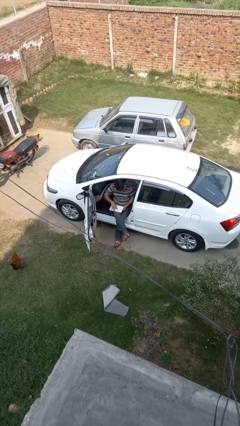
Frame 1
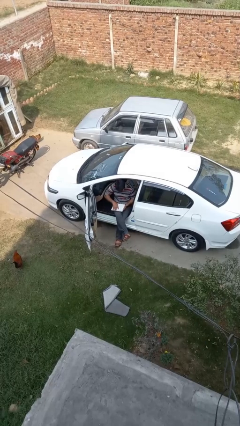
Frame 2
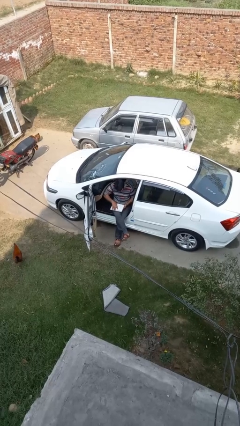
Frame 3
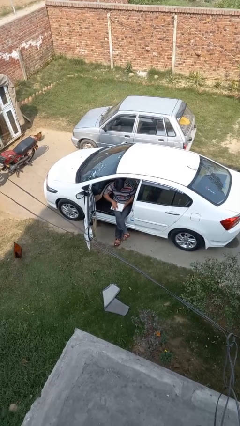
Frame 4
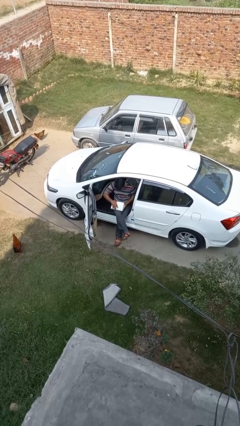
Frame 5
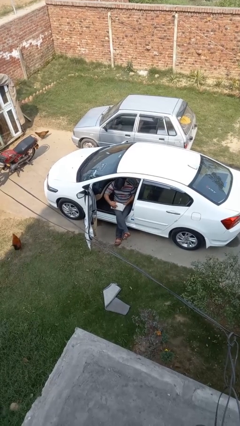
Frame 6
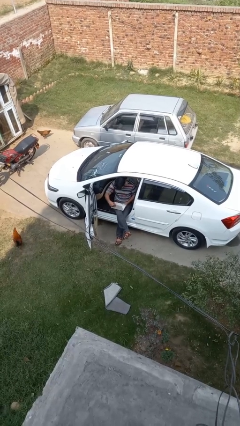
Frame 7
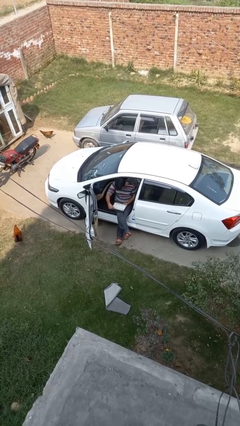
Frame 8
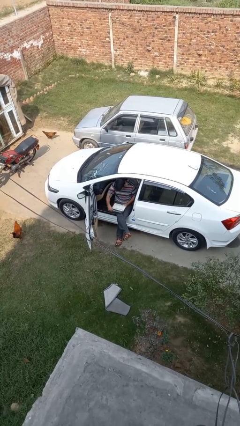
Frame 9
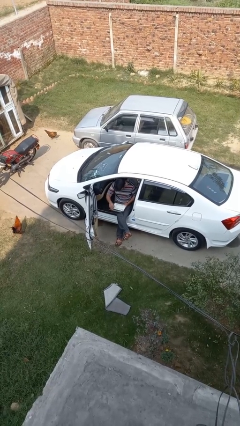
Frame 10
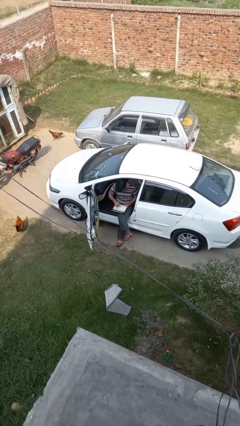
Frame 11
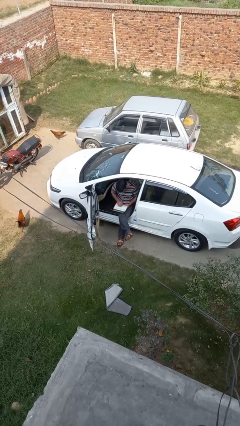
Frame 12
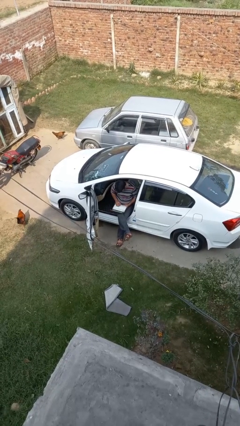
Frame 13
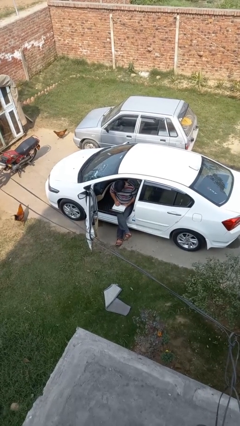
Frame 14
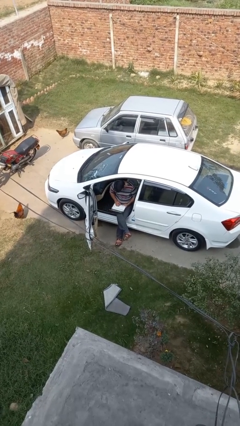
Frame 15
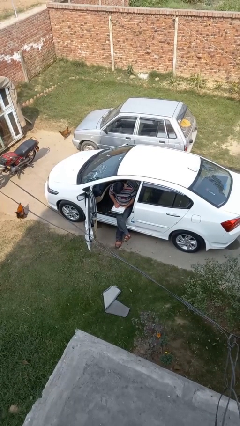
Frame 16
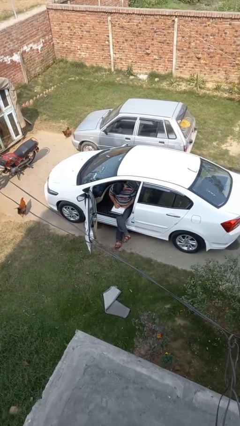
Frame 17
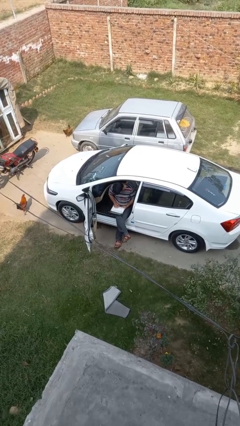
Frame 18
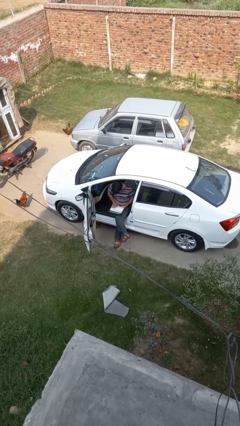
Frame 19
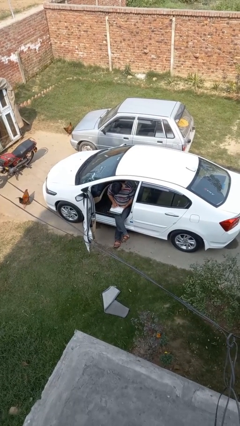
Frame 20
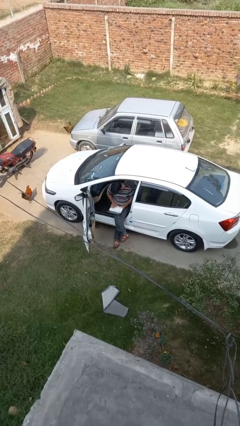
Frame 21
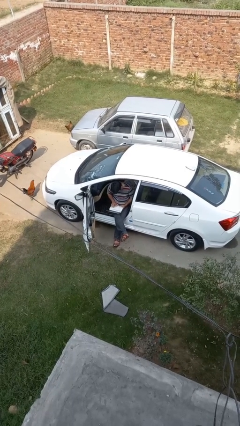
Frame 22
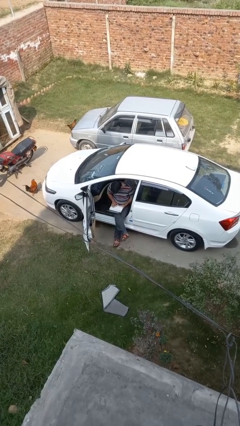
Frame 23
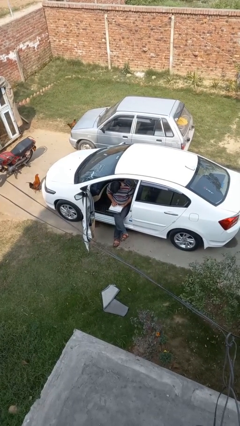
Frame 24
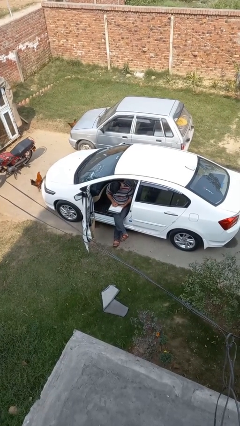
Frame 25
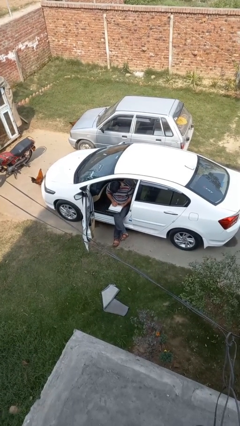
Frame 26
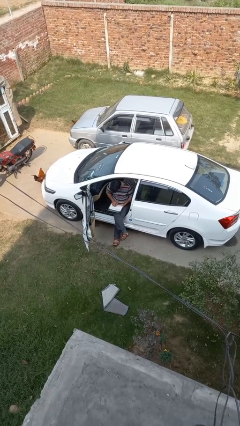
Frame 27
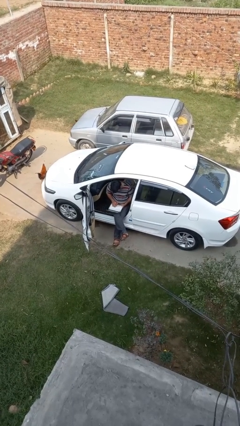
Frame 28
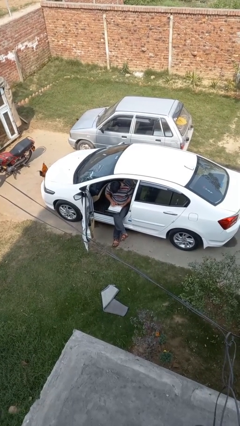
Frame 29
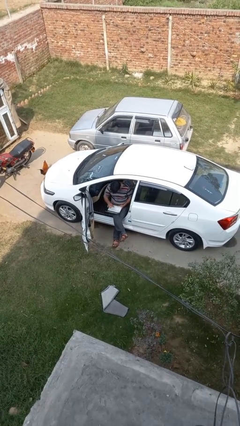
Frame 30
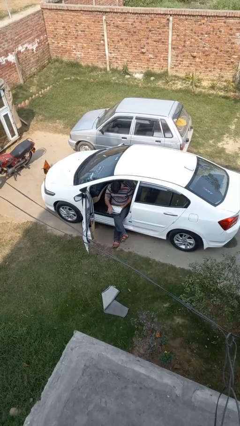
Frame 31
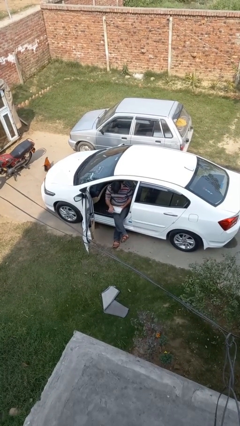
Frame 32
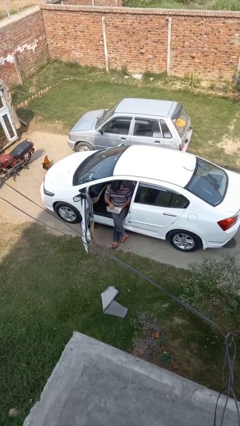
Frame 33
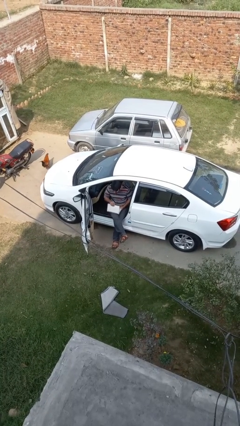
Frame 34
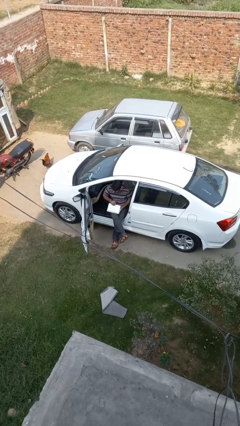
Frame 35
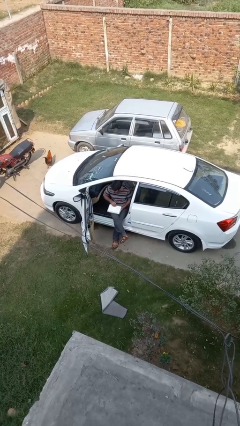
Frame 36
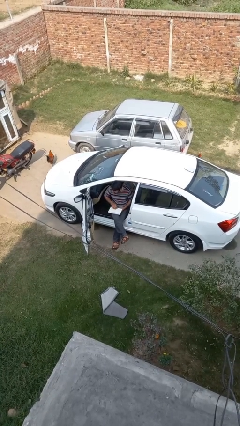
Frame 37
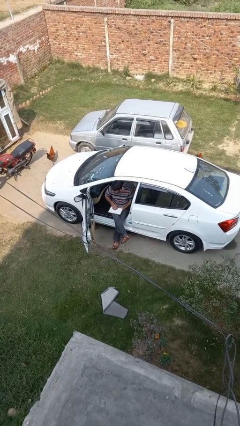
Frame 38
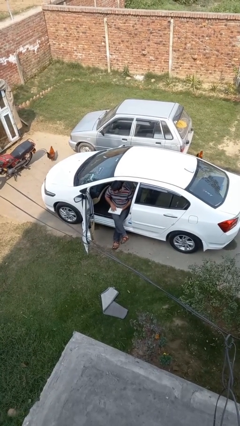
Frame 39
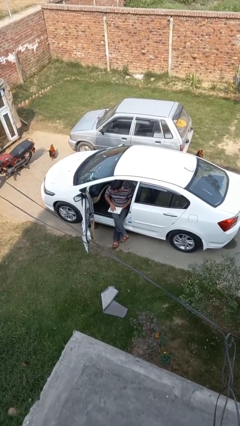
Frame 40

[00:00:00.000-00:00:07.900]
person interacts with laptop

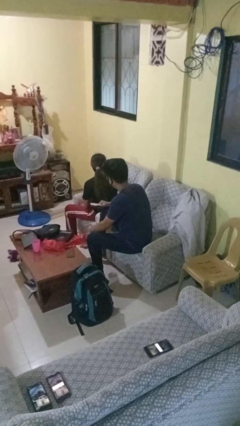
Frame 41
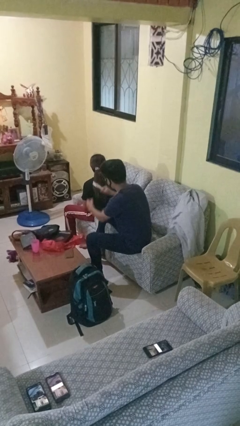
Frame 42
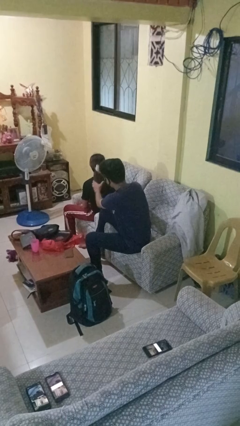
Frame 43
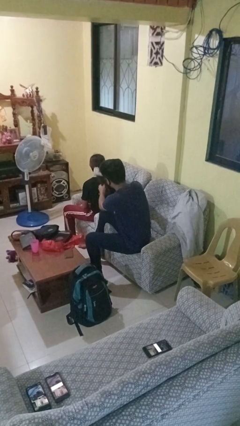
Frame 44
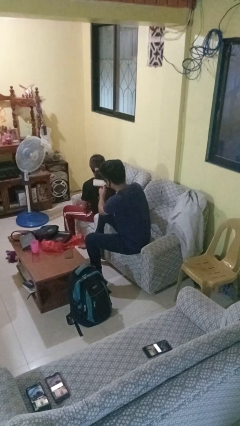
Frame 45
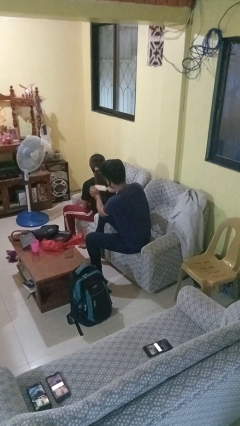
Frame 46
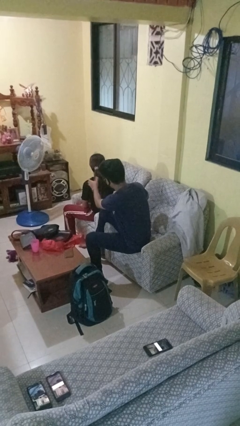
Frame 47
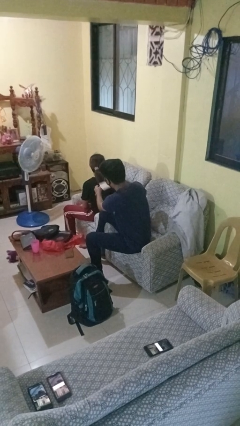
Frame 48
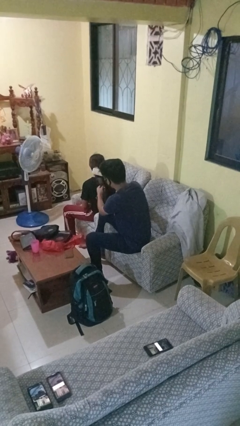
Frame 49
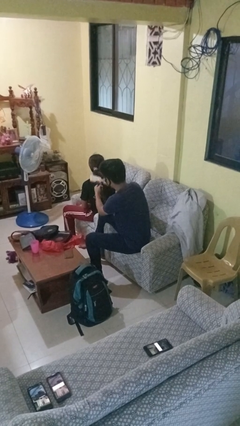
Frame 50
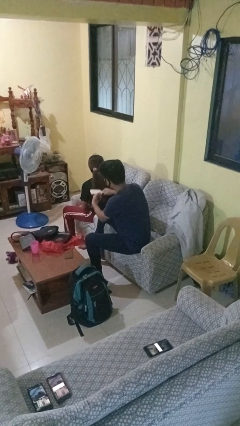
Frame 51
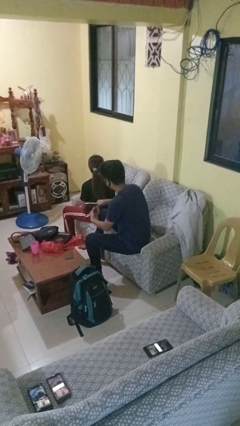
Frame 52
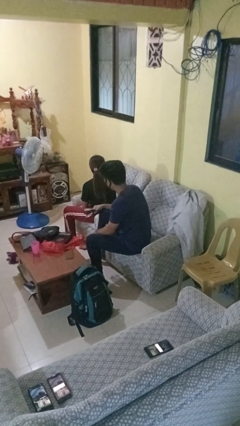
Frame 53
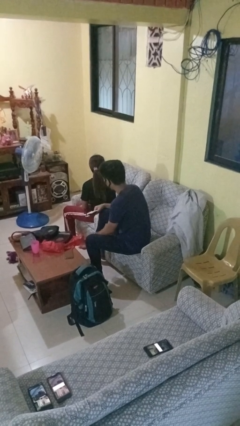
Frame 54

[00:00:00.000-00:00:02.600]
person brushes hair of person

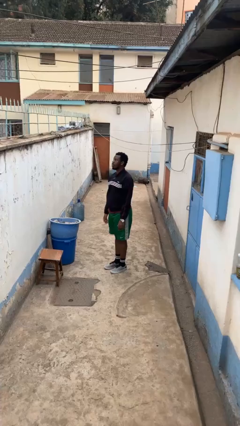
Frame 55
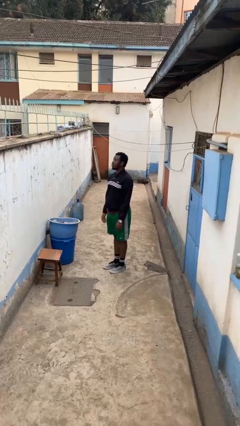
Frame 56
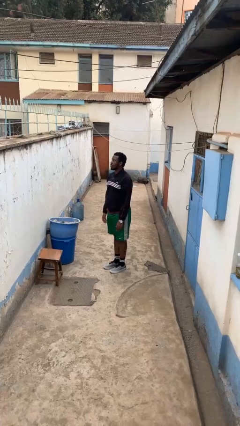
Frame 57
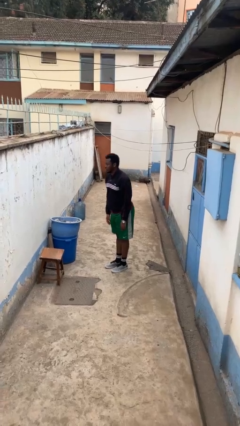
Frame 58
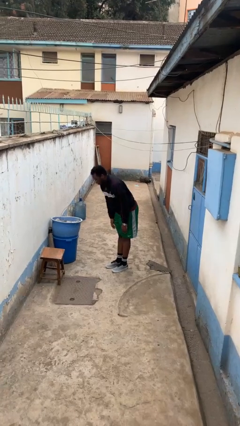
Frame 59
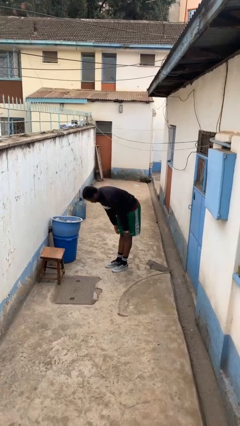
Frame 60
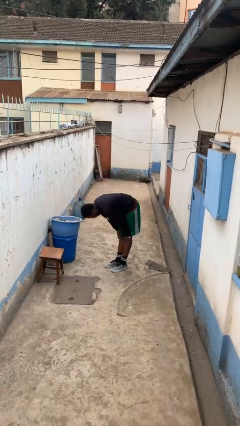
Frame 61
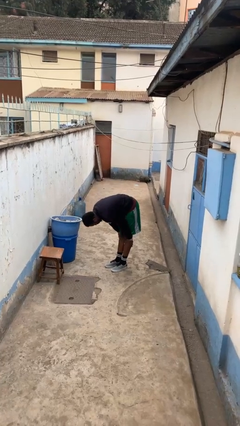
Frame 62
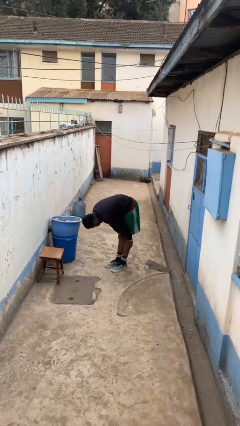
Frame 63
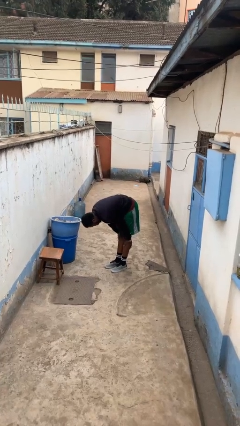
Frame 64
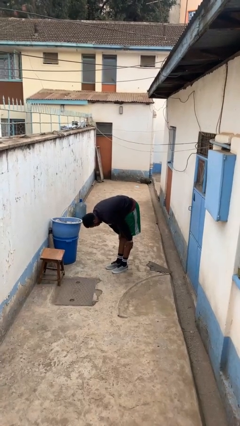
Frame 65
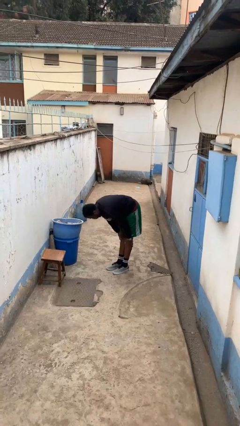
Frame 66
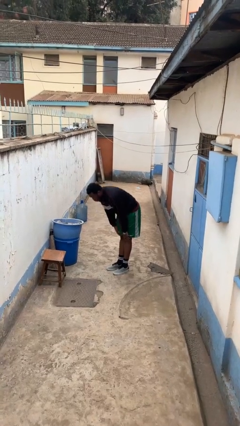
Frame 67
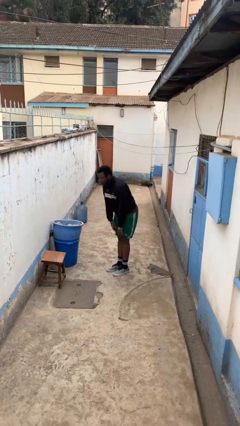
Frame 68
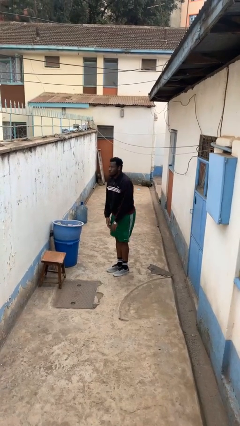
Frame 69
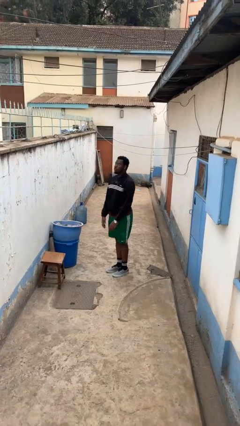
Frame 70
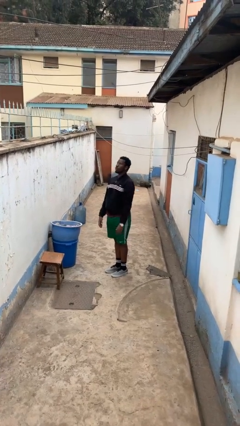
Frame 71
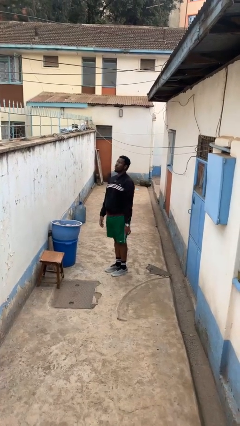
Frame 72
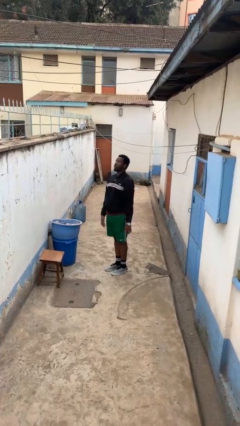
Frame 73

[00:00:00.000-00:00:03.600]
person bows

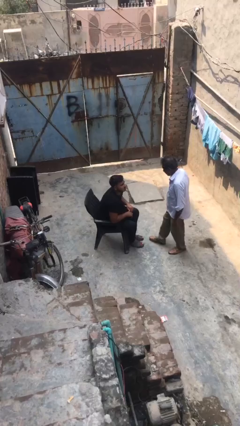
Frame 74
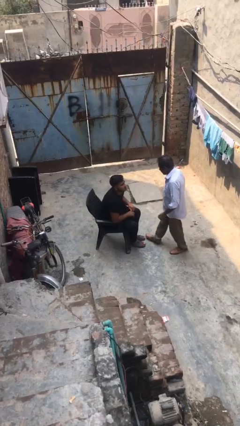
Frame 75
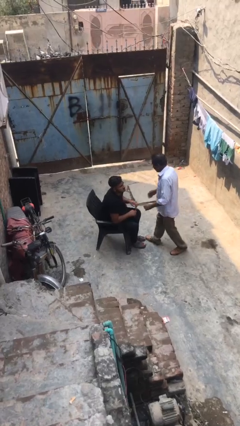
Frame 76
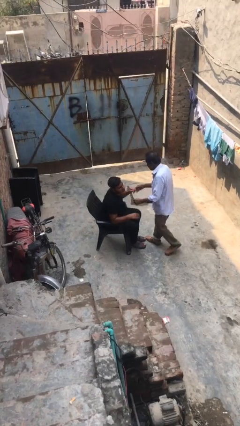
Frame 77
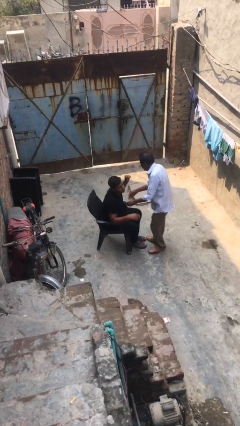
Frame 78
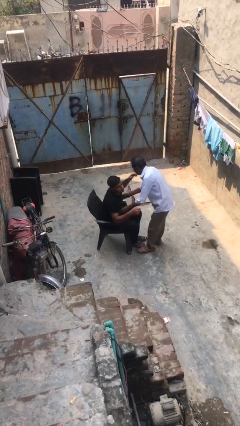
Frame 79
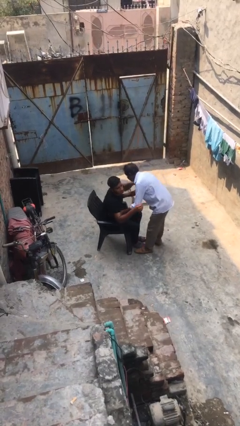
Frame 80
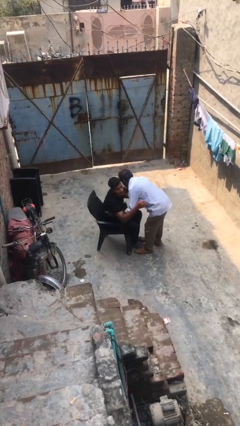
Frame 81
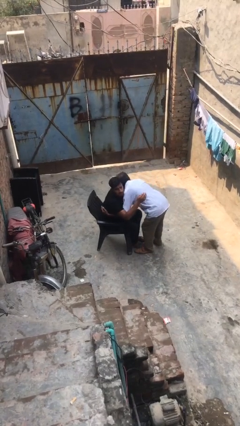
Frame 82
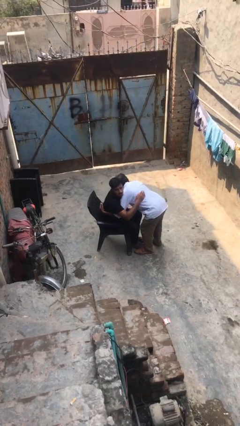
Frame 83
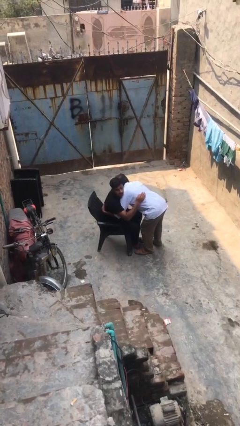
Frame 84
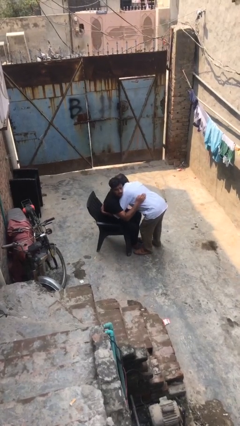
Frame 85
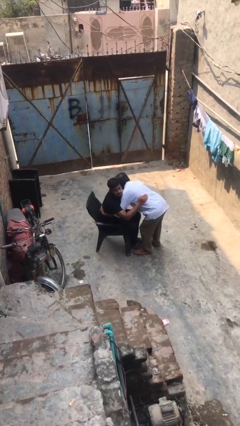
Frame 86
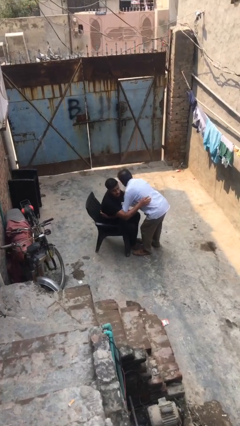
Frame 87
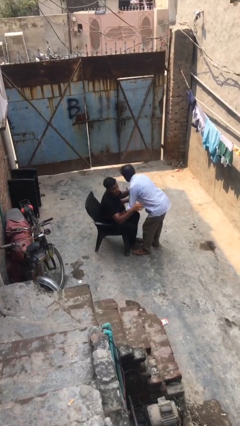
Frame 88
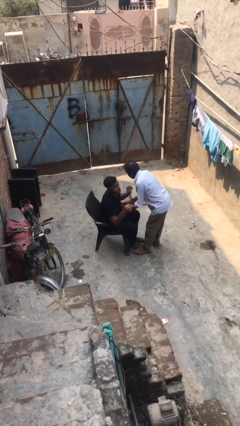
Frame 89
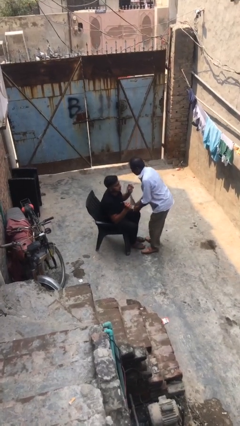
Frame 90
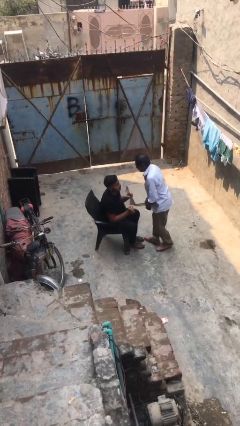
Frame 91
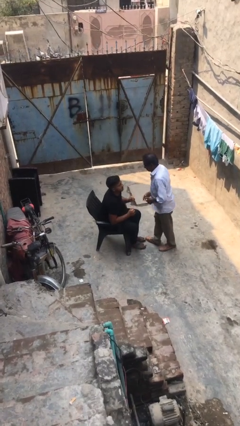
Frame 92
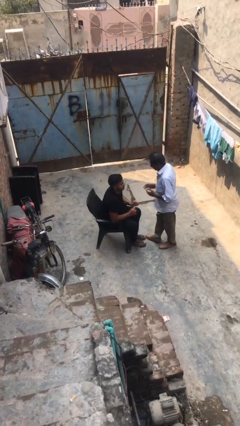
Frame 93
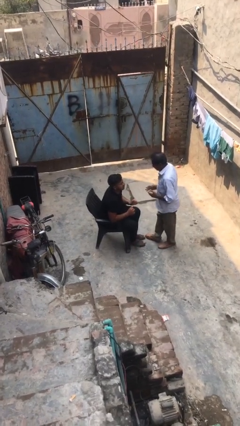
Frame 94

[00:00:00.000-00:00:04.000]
person embraces person
